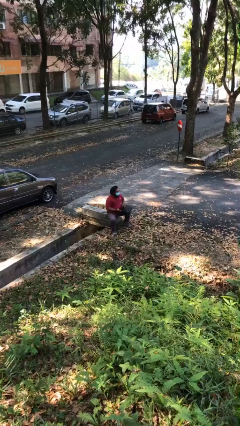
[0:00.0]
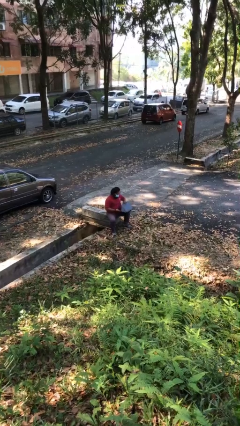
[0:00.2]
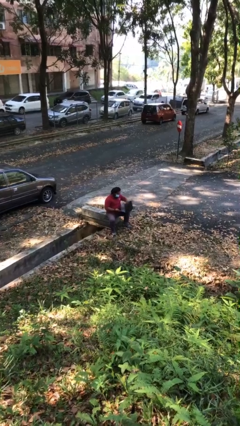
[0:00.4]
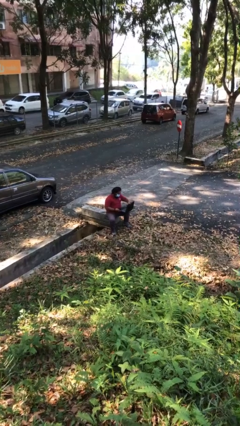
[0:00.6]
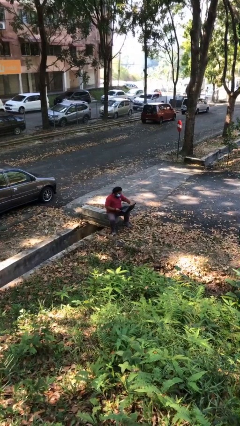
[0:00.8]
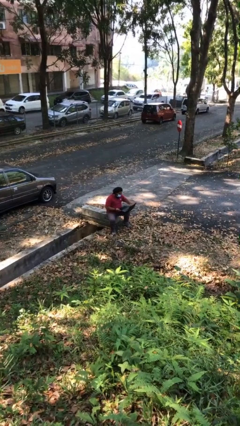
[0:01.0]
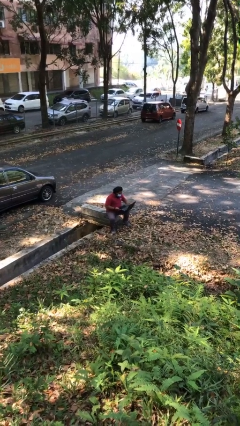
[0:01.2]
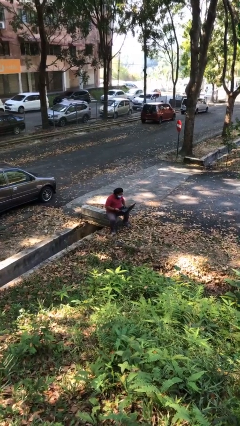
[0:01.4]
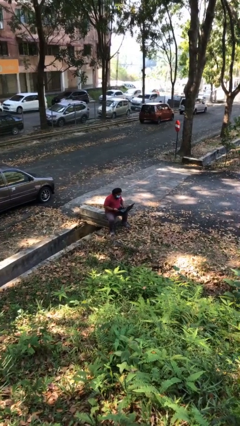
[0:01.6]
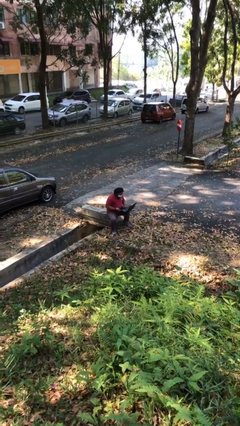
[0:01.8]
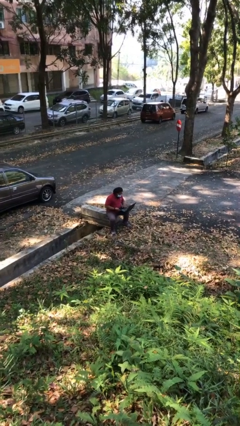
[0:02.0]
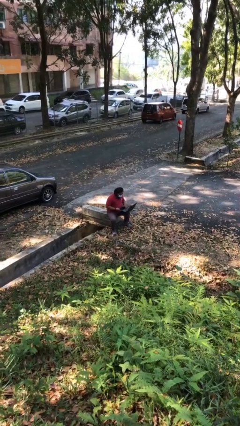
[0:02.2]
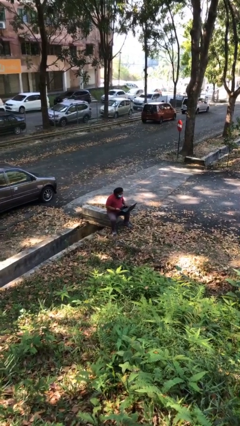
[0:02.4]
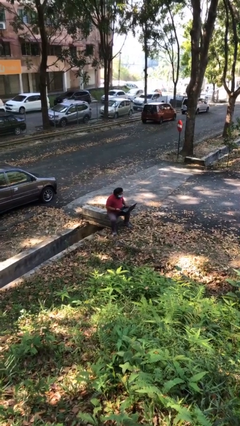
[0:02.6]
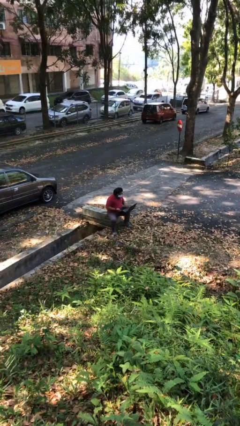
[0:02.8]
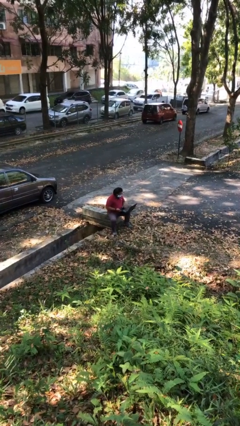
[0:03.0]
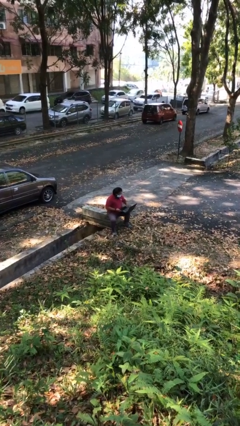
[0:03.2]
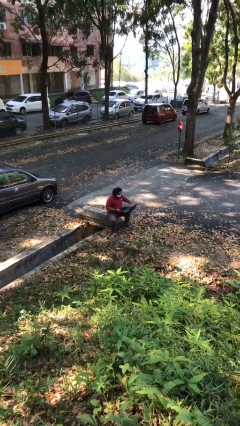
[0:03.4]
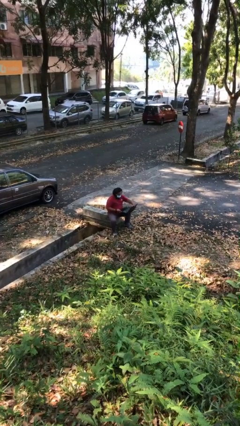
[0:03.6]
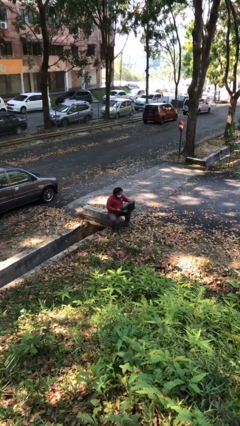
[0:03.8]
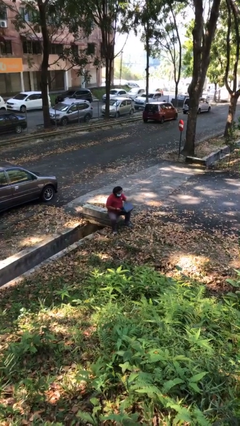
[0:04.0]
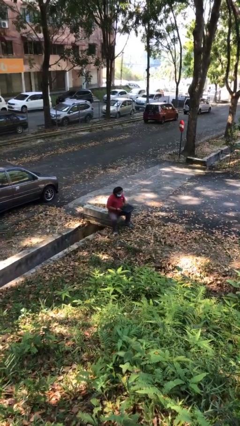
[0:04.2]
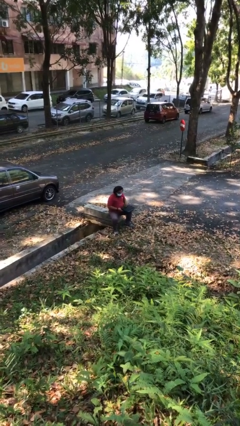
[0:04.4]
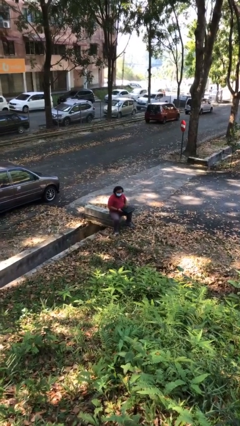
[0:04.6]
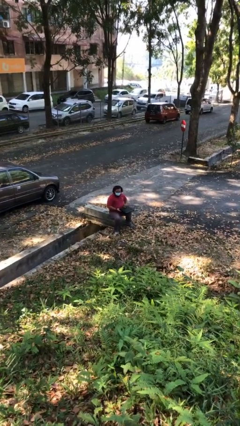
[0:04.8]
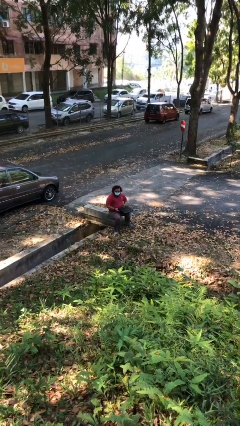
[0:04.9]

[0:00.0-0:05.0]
person interacts with laptop

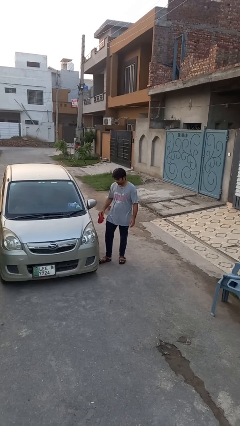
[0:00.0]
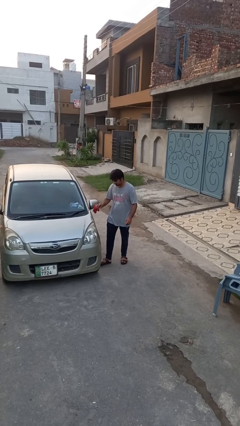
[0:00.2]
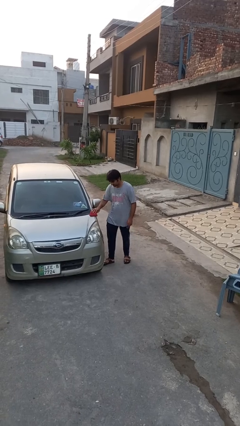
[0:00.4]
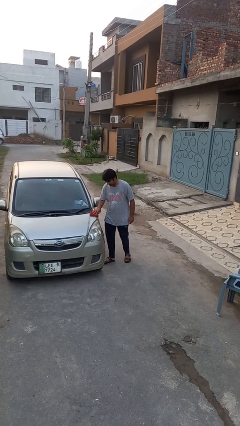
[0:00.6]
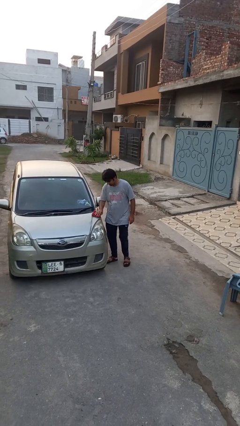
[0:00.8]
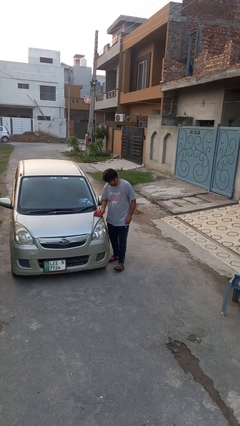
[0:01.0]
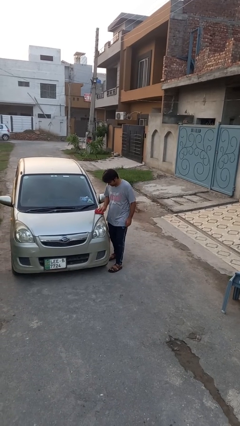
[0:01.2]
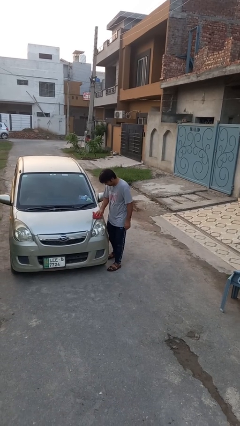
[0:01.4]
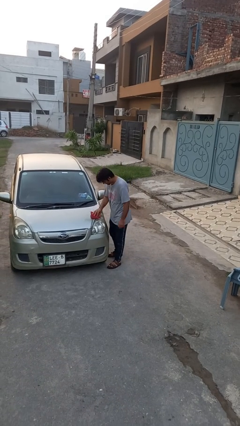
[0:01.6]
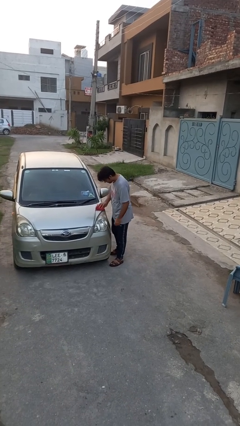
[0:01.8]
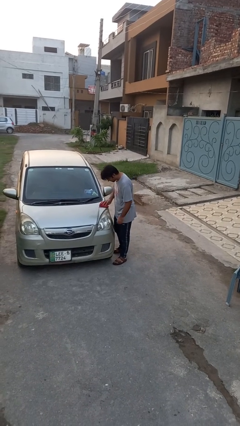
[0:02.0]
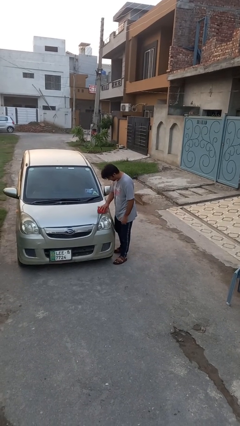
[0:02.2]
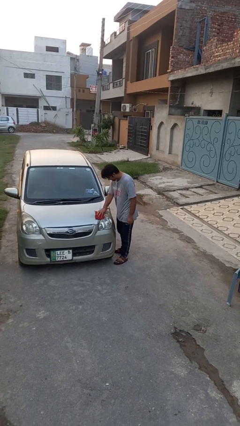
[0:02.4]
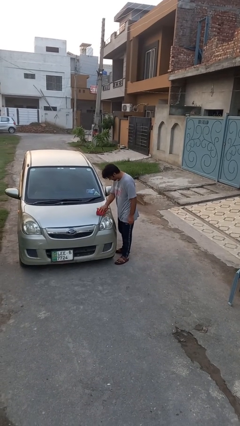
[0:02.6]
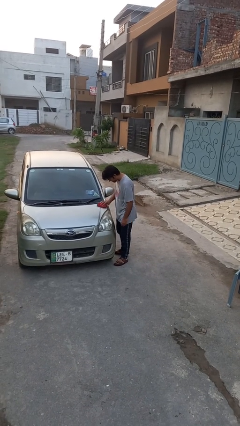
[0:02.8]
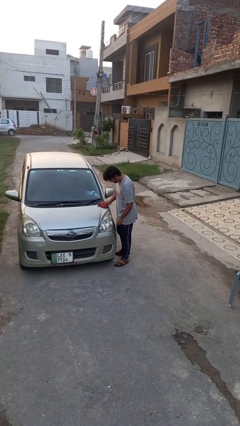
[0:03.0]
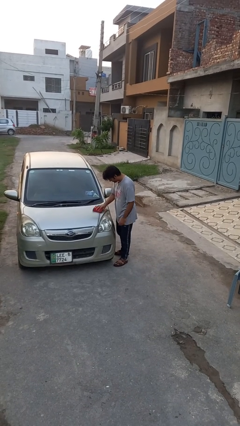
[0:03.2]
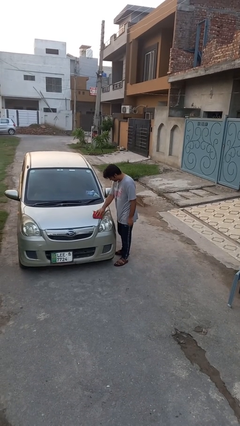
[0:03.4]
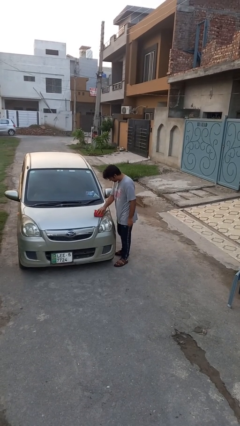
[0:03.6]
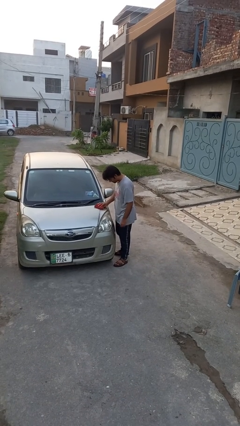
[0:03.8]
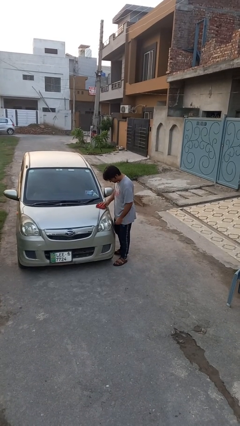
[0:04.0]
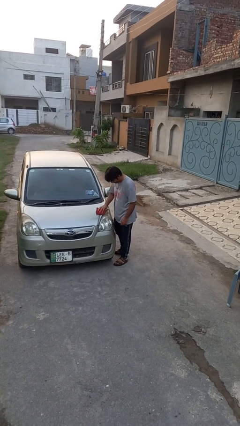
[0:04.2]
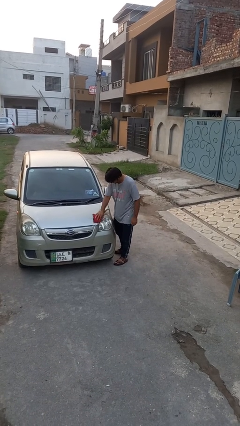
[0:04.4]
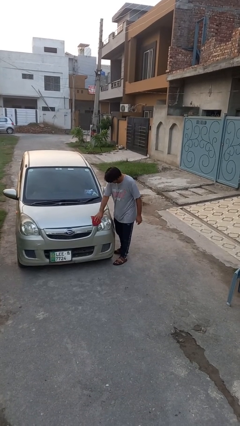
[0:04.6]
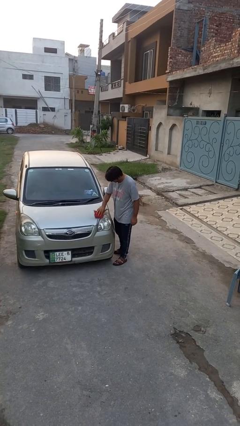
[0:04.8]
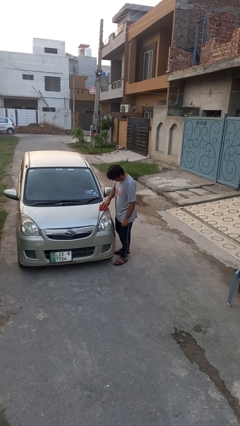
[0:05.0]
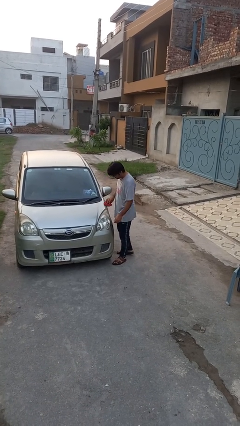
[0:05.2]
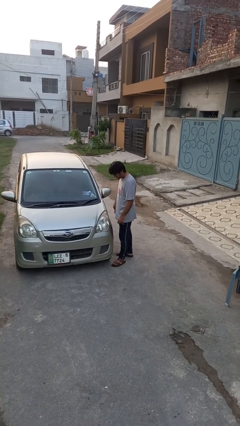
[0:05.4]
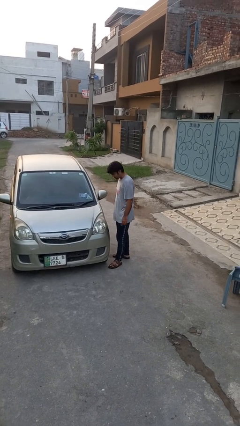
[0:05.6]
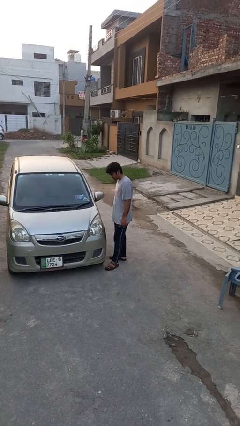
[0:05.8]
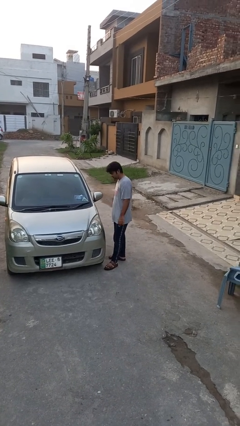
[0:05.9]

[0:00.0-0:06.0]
person polishes car with rag

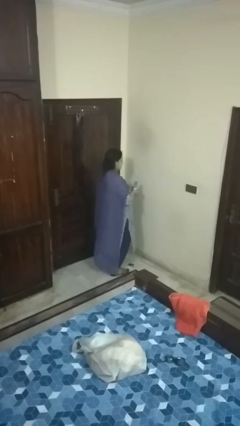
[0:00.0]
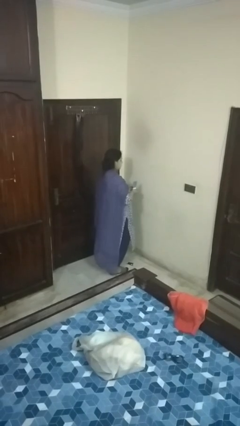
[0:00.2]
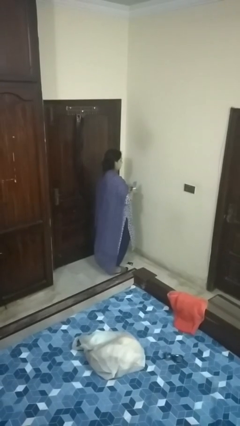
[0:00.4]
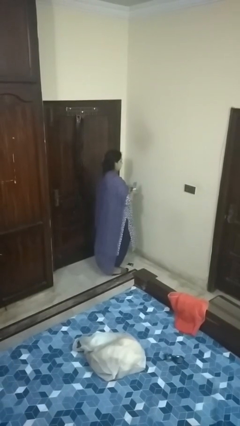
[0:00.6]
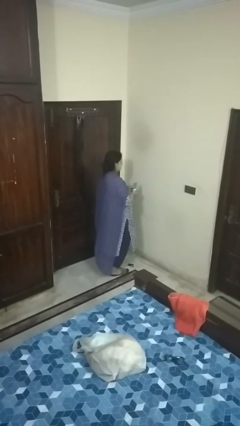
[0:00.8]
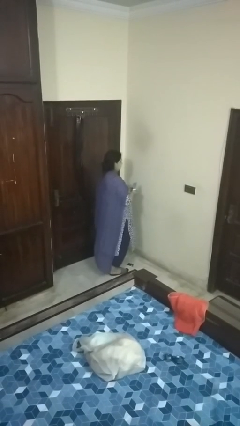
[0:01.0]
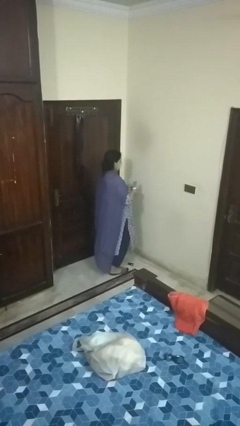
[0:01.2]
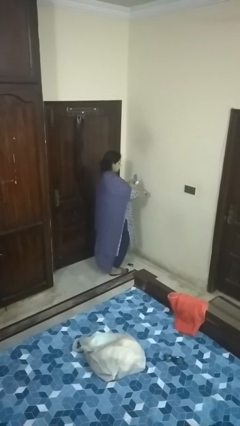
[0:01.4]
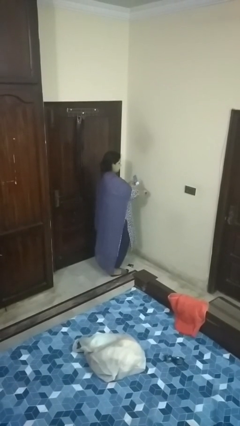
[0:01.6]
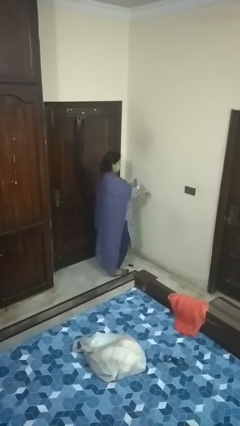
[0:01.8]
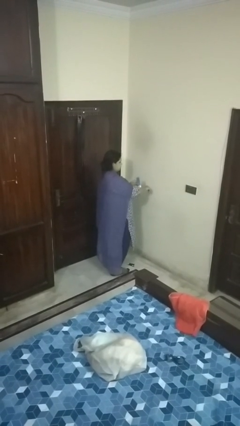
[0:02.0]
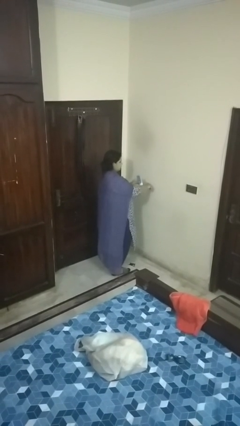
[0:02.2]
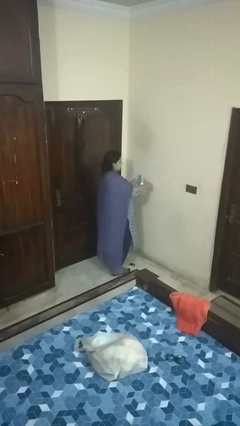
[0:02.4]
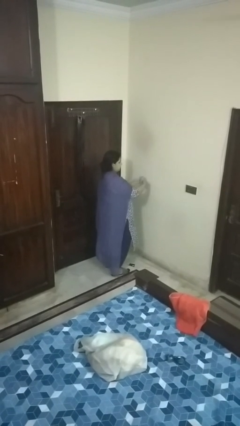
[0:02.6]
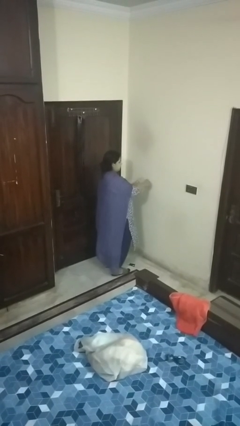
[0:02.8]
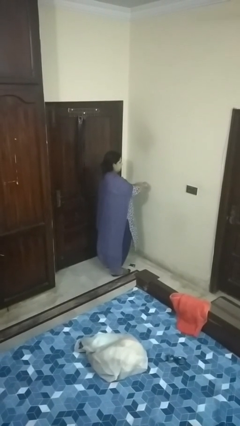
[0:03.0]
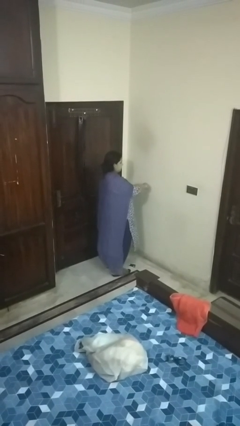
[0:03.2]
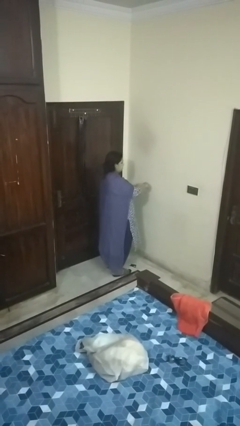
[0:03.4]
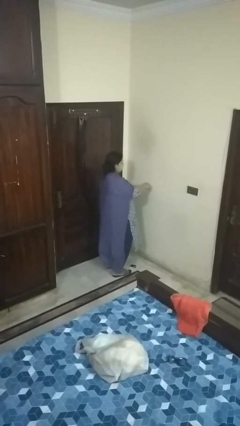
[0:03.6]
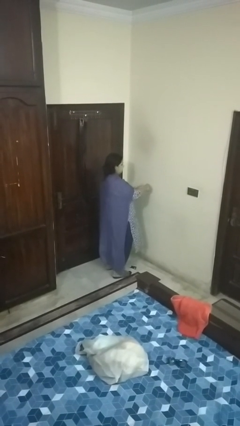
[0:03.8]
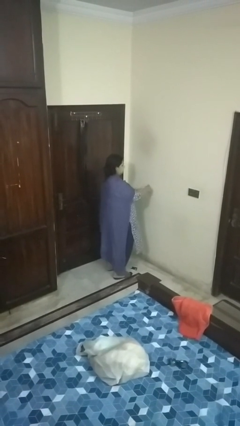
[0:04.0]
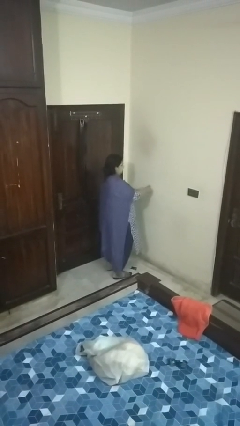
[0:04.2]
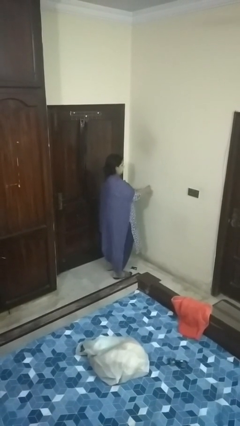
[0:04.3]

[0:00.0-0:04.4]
person applies sunscreen

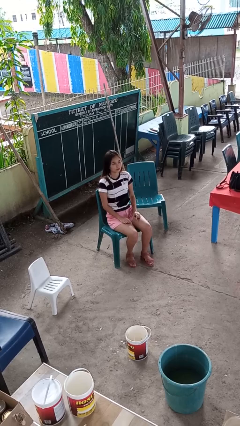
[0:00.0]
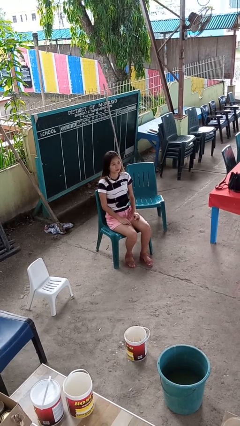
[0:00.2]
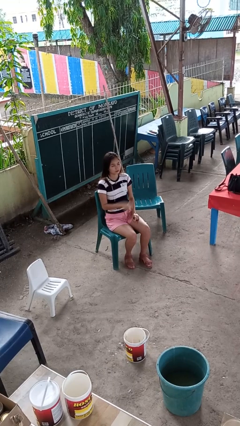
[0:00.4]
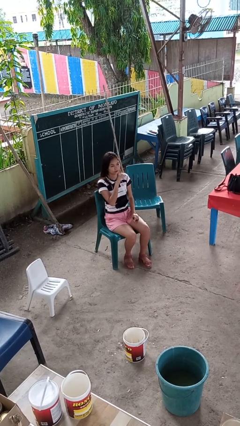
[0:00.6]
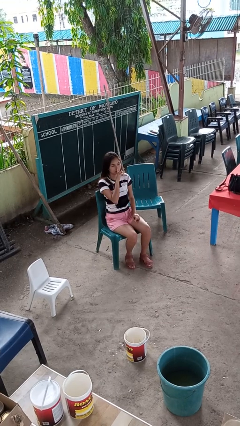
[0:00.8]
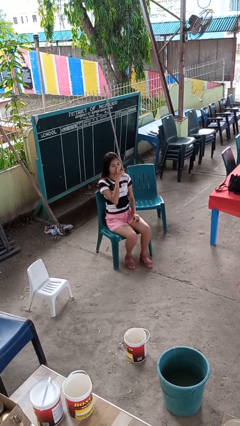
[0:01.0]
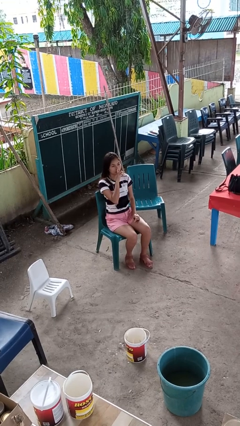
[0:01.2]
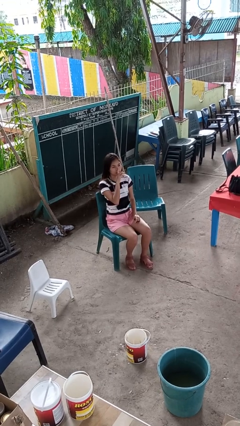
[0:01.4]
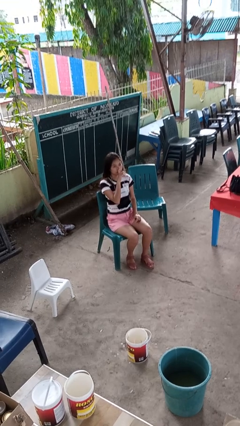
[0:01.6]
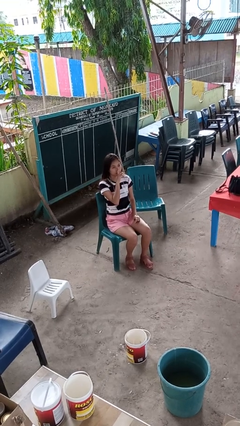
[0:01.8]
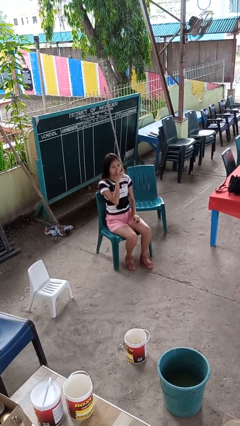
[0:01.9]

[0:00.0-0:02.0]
person gestures be quiet

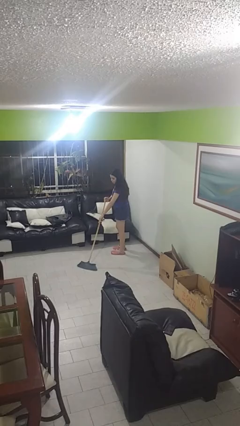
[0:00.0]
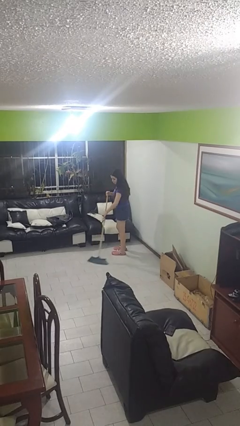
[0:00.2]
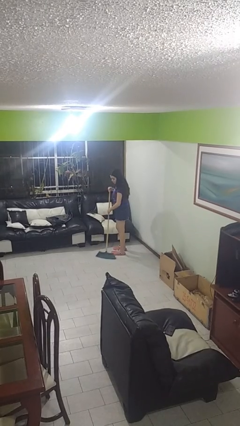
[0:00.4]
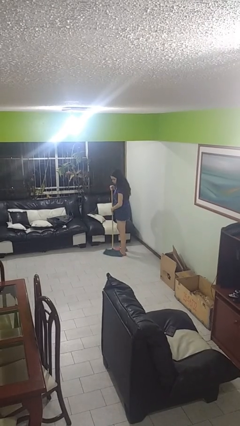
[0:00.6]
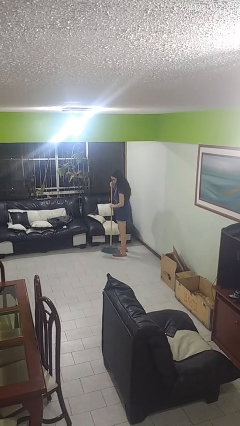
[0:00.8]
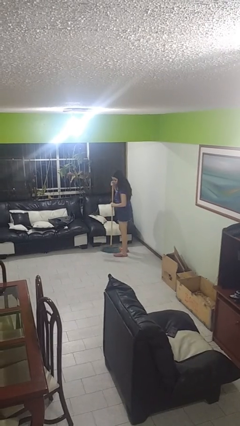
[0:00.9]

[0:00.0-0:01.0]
person sweeps floor
